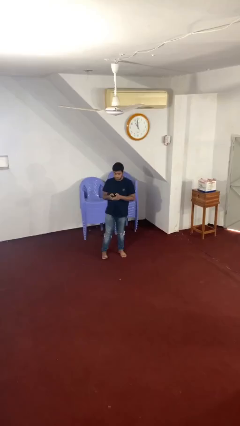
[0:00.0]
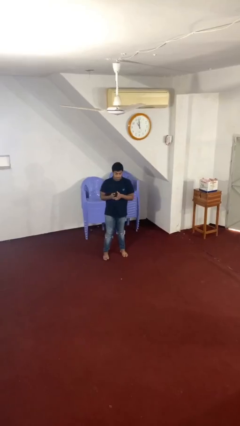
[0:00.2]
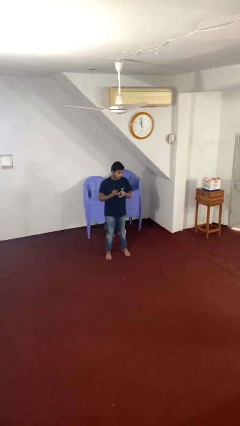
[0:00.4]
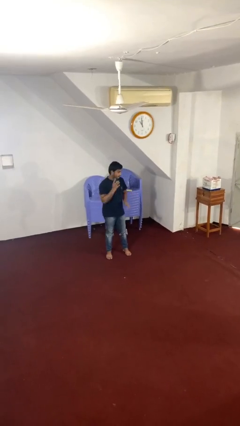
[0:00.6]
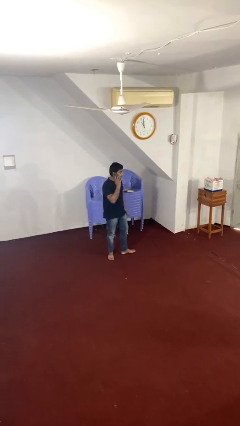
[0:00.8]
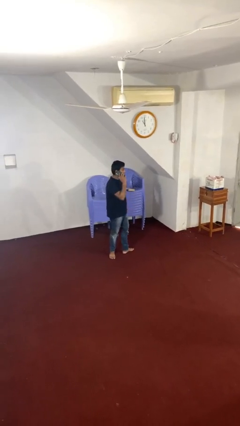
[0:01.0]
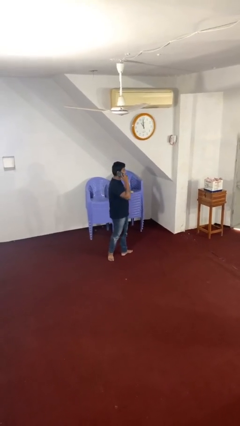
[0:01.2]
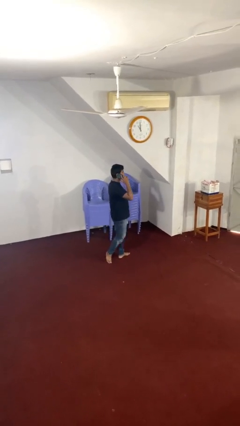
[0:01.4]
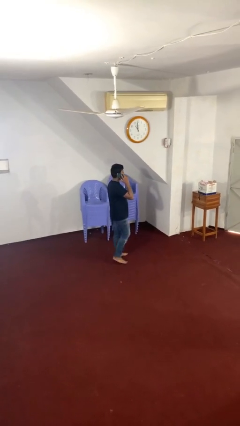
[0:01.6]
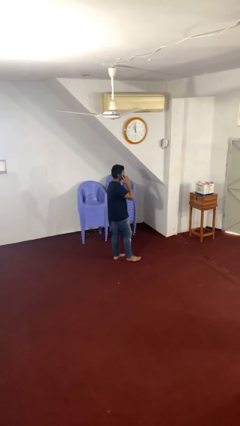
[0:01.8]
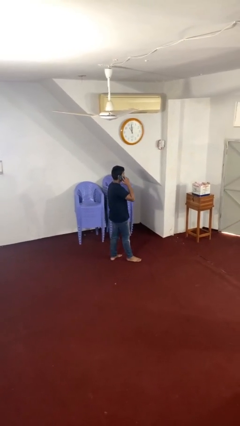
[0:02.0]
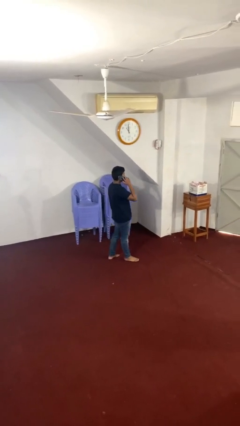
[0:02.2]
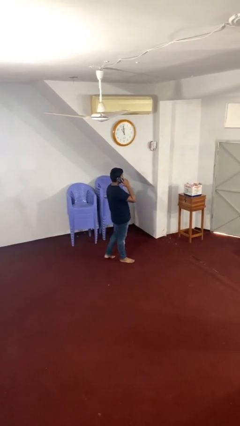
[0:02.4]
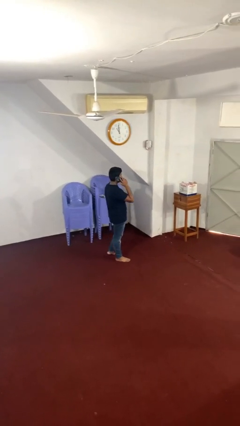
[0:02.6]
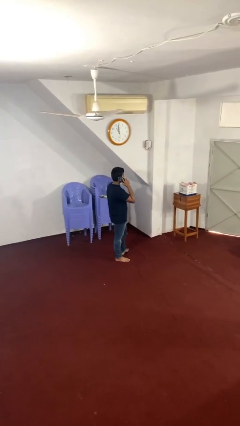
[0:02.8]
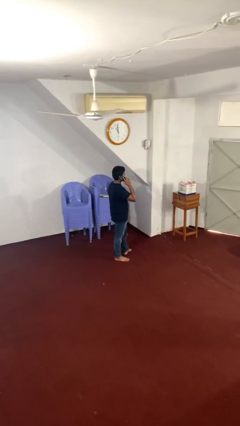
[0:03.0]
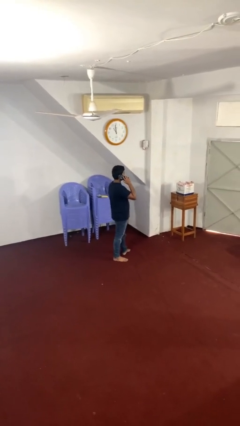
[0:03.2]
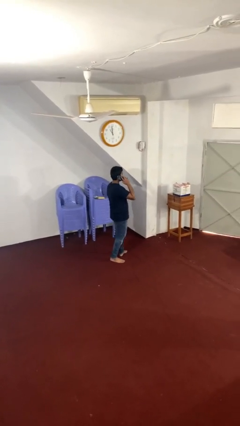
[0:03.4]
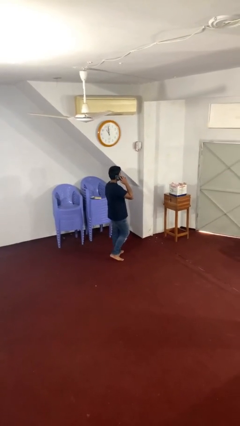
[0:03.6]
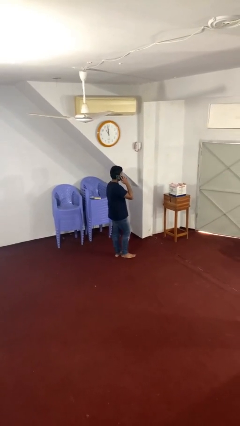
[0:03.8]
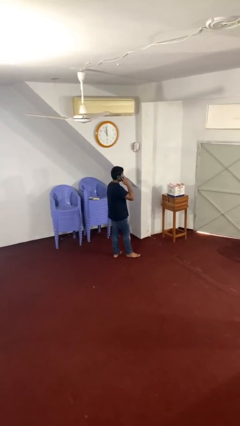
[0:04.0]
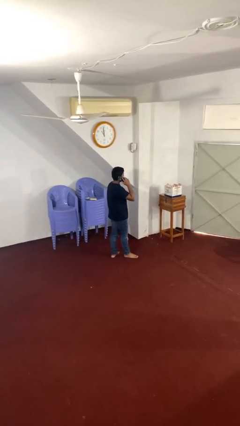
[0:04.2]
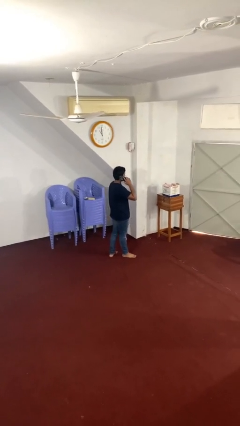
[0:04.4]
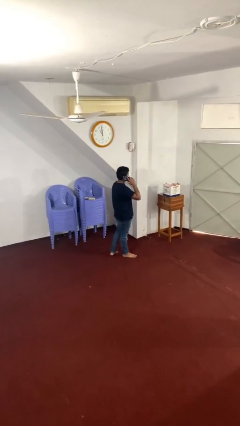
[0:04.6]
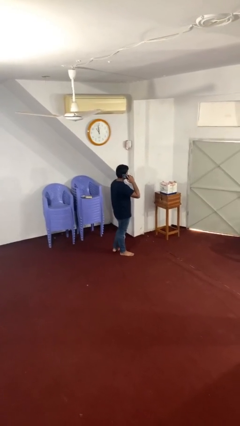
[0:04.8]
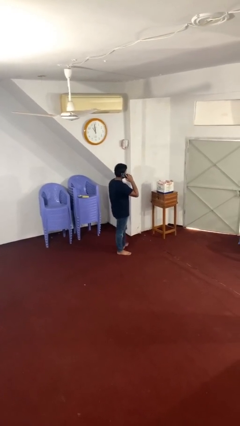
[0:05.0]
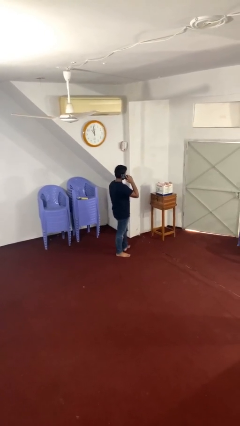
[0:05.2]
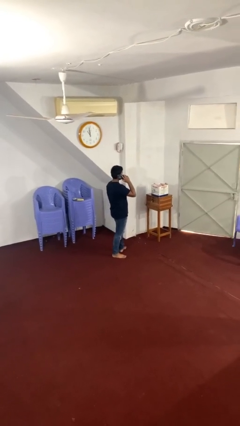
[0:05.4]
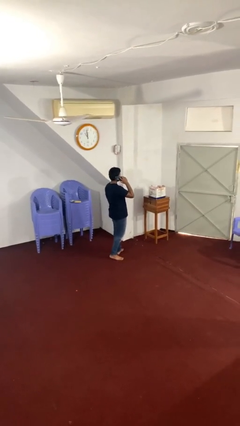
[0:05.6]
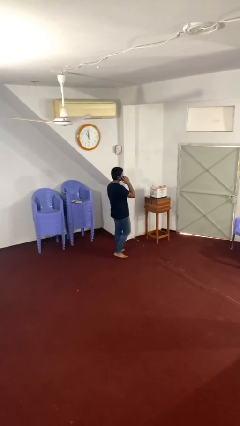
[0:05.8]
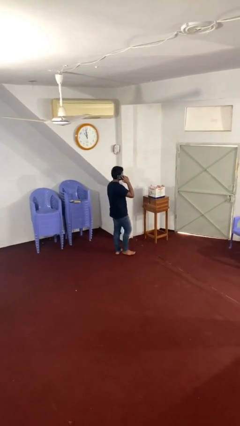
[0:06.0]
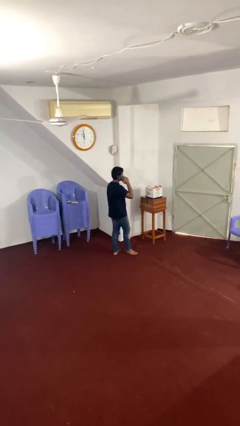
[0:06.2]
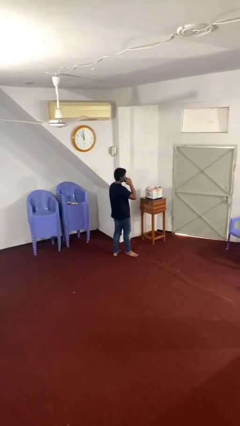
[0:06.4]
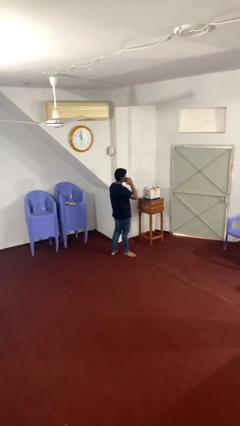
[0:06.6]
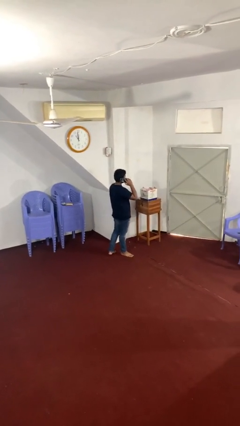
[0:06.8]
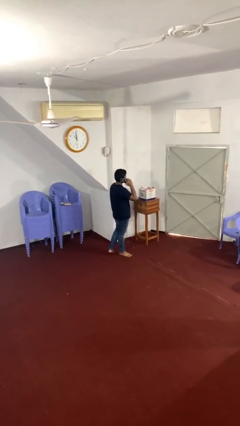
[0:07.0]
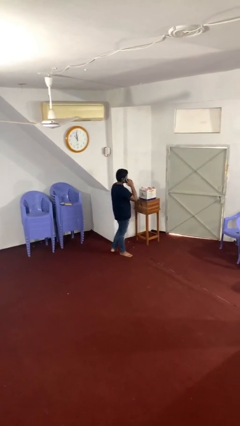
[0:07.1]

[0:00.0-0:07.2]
person talks on phone

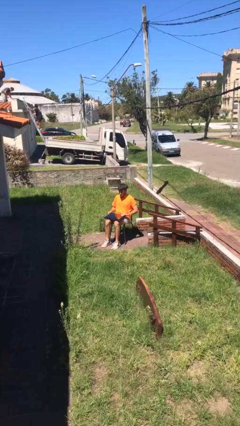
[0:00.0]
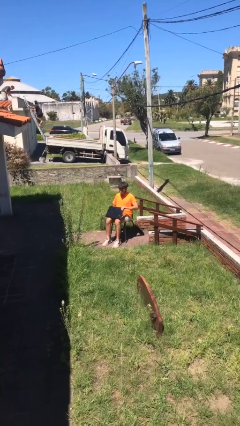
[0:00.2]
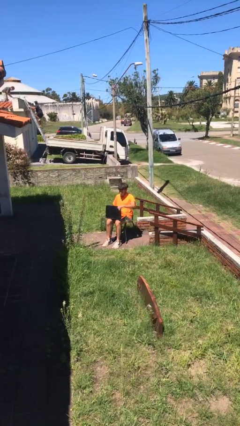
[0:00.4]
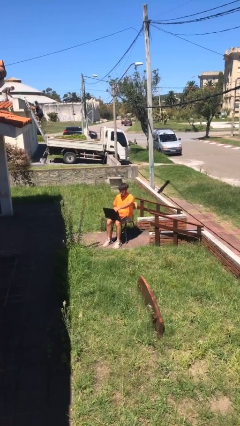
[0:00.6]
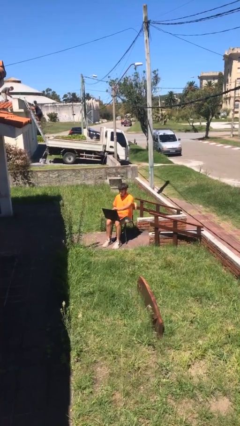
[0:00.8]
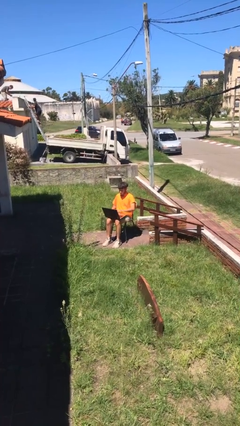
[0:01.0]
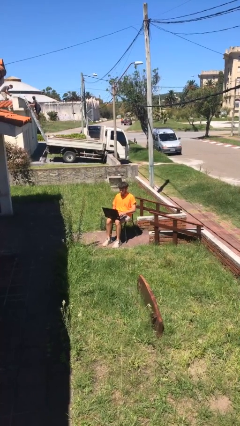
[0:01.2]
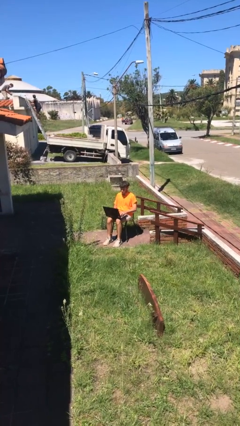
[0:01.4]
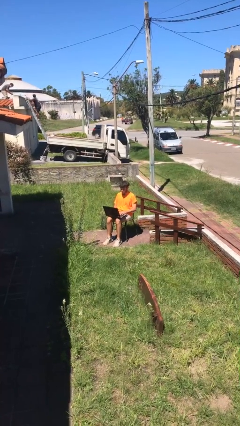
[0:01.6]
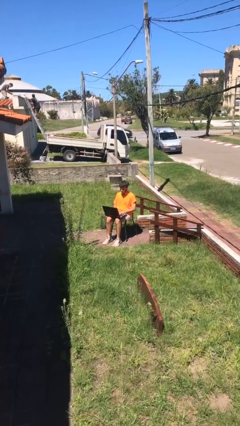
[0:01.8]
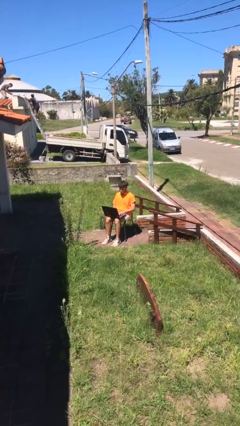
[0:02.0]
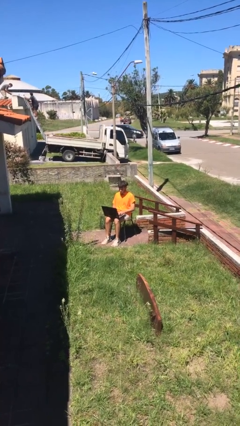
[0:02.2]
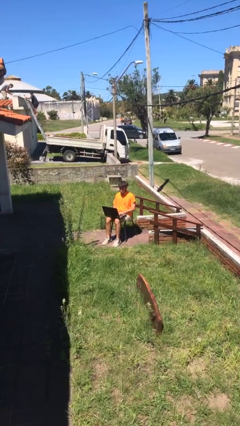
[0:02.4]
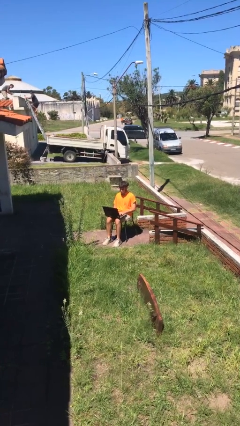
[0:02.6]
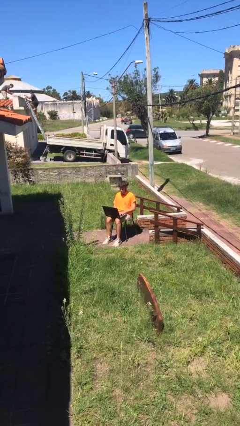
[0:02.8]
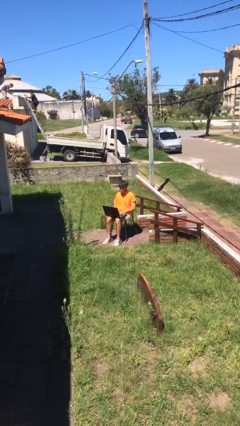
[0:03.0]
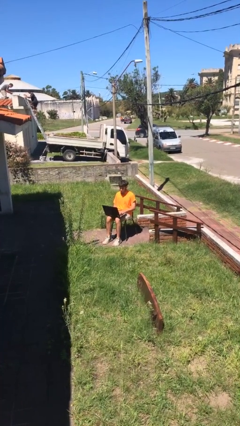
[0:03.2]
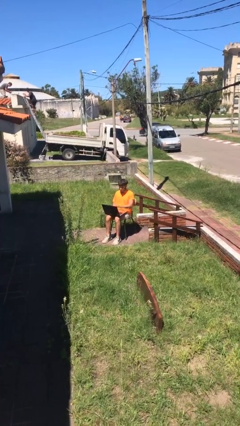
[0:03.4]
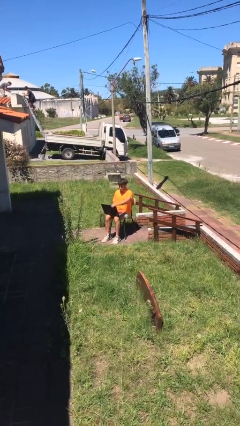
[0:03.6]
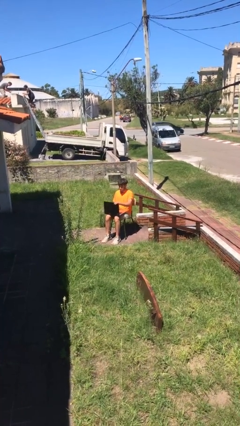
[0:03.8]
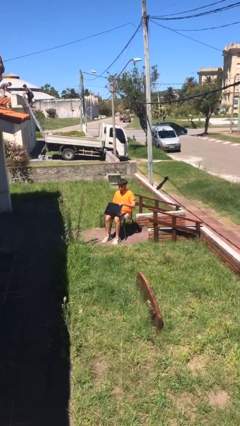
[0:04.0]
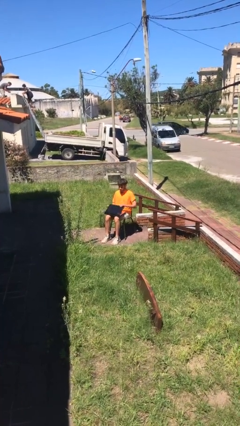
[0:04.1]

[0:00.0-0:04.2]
person interacts with laptop

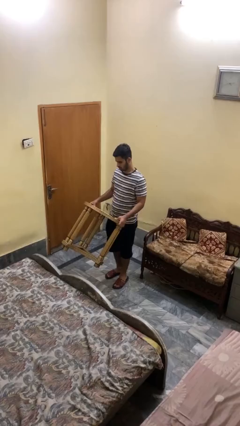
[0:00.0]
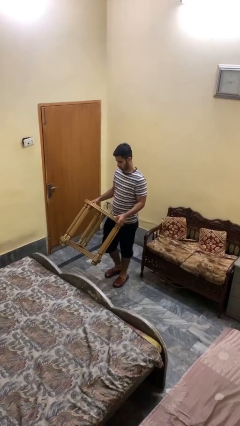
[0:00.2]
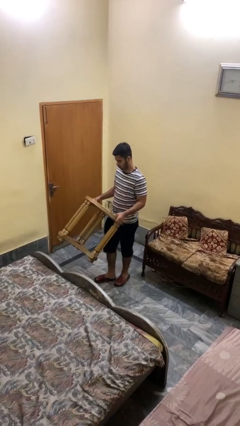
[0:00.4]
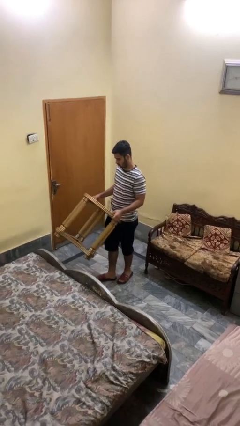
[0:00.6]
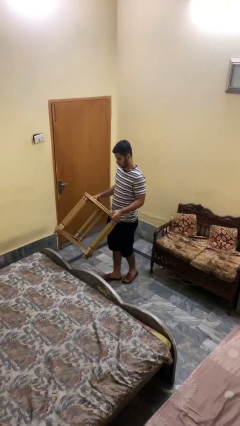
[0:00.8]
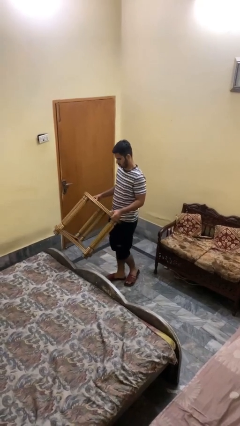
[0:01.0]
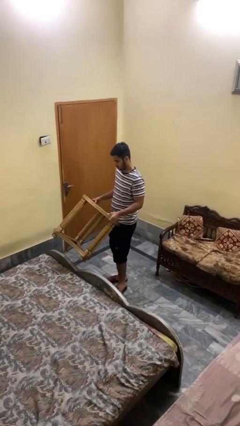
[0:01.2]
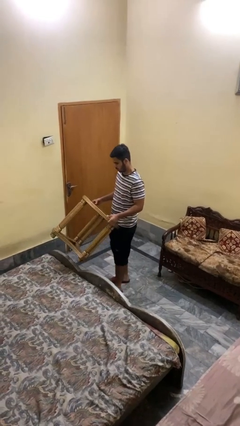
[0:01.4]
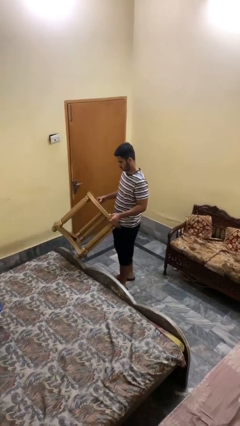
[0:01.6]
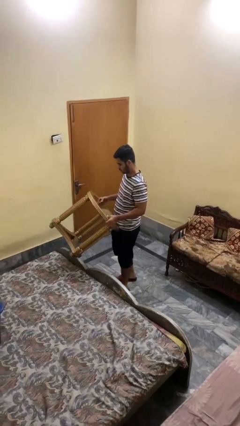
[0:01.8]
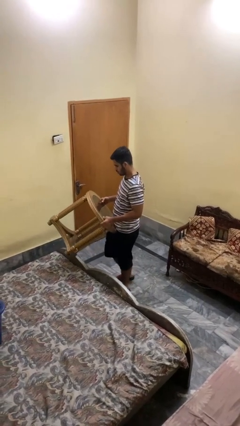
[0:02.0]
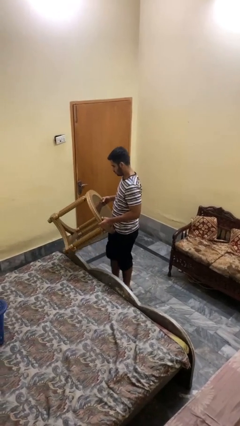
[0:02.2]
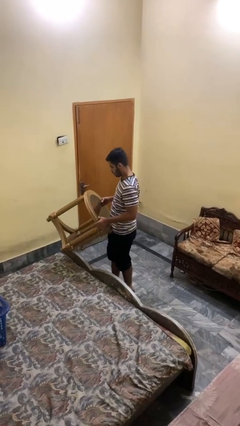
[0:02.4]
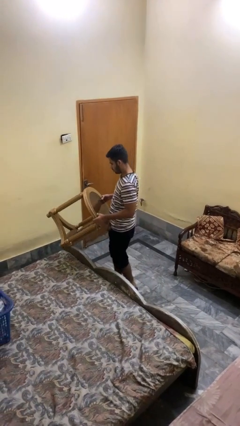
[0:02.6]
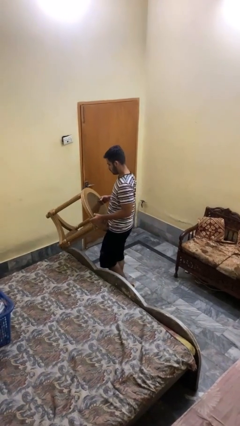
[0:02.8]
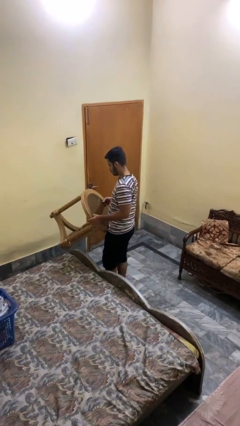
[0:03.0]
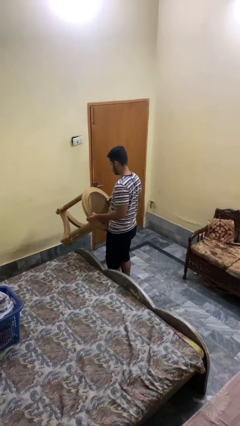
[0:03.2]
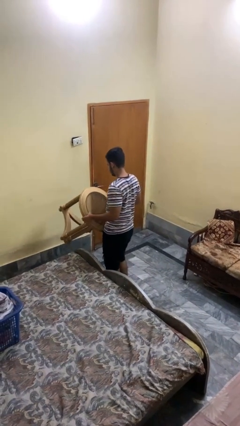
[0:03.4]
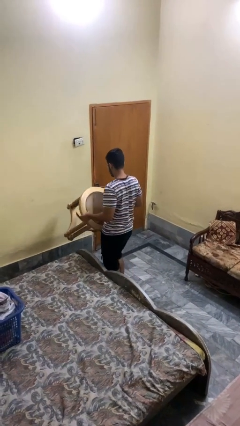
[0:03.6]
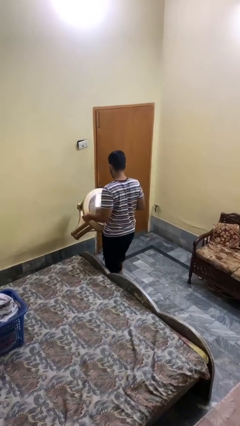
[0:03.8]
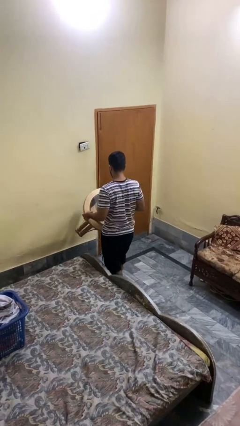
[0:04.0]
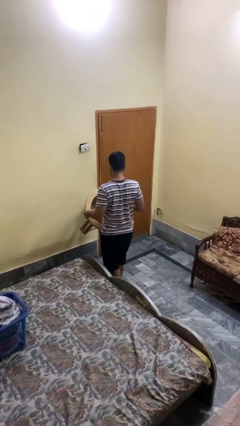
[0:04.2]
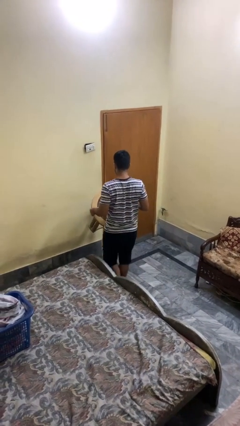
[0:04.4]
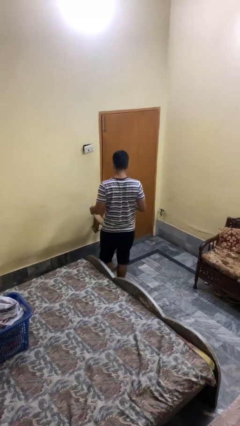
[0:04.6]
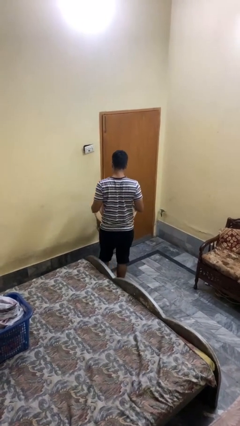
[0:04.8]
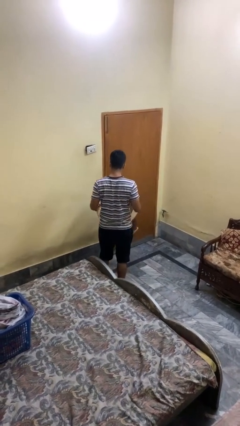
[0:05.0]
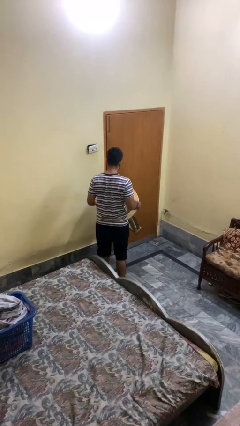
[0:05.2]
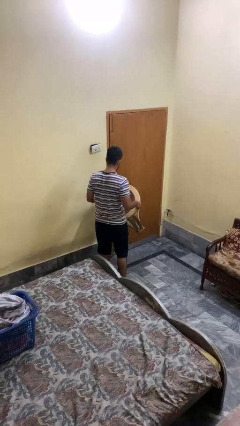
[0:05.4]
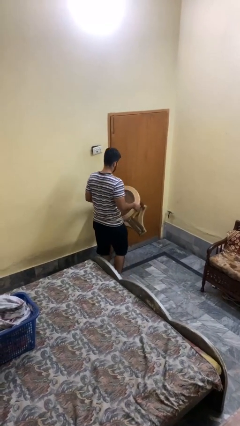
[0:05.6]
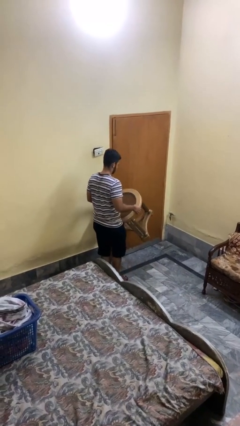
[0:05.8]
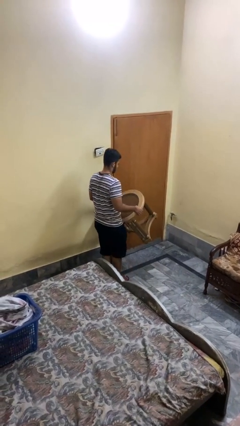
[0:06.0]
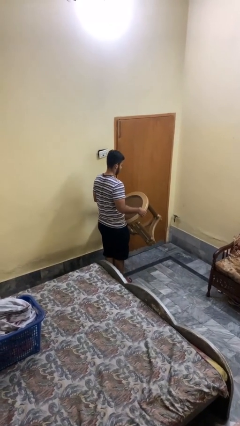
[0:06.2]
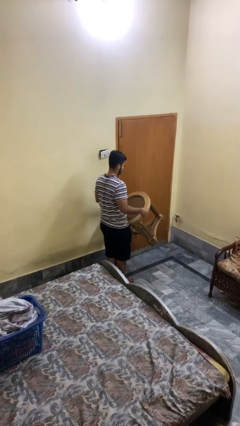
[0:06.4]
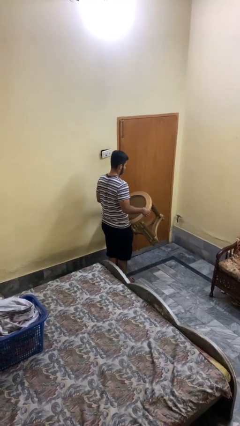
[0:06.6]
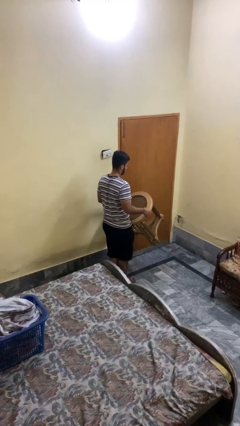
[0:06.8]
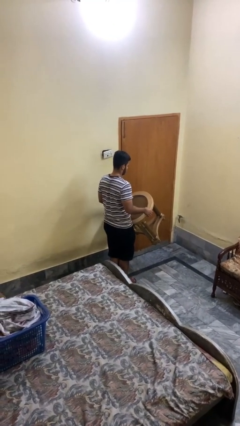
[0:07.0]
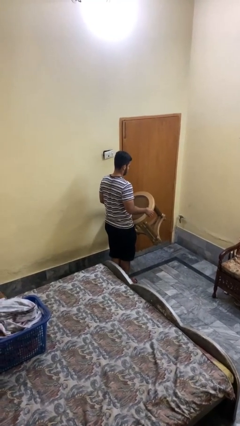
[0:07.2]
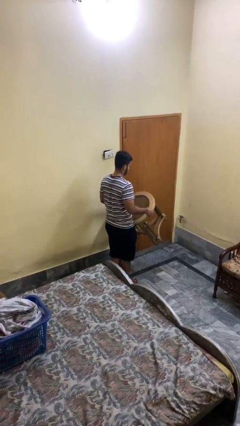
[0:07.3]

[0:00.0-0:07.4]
person carries furniture
